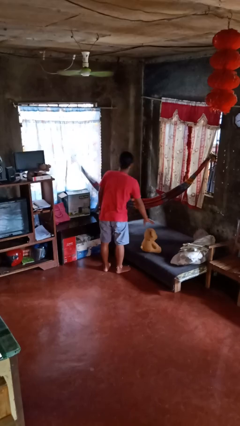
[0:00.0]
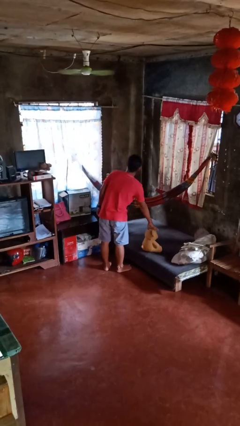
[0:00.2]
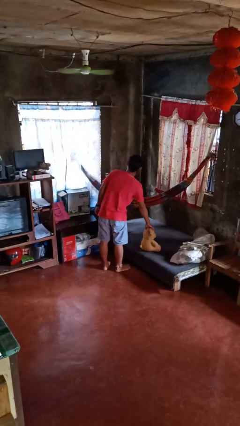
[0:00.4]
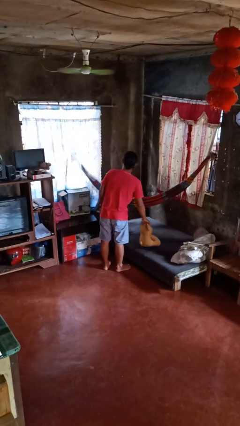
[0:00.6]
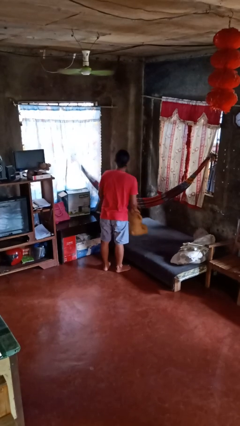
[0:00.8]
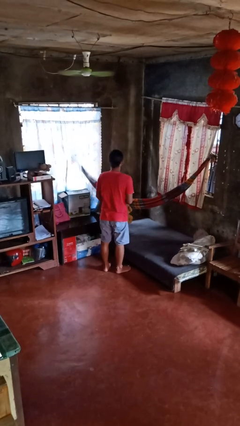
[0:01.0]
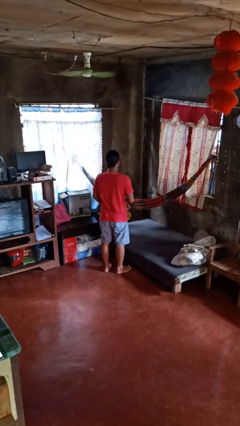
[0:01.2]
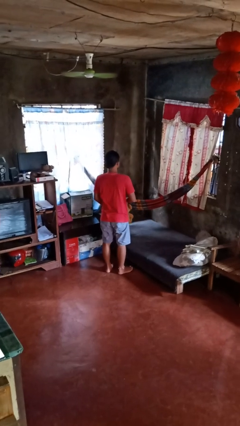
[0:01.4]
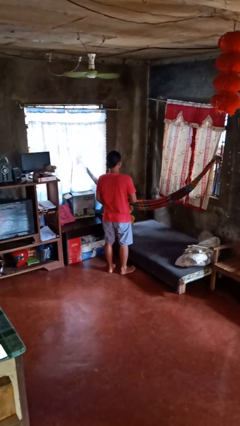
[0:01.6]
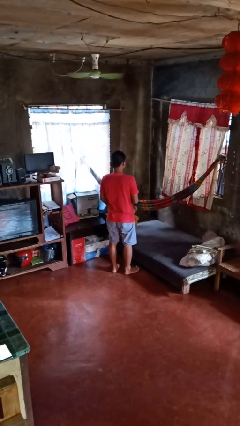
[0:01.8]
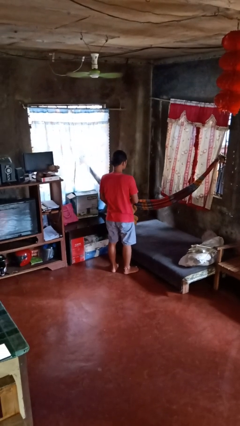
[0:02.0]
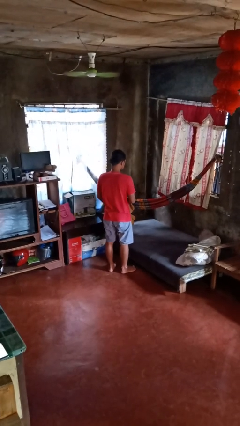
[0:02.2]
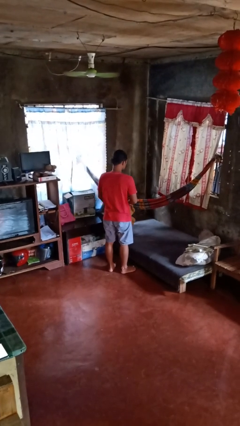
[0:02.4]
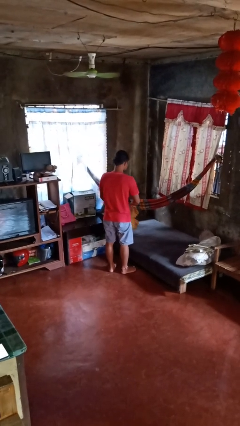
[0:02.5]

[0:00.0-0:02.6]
person picks up object from bed

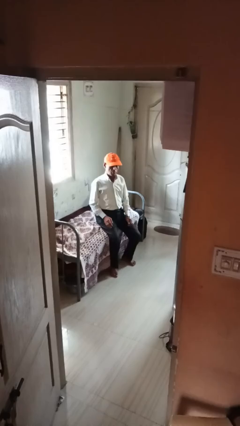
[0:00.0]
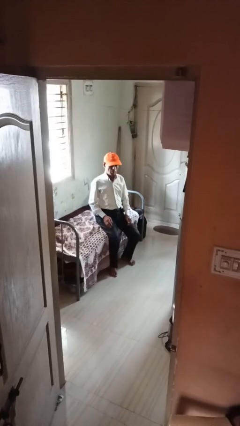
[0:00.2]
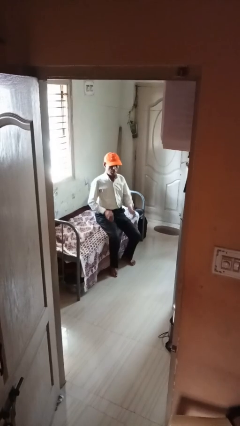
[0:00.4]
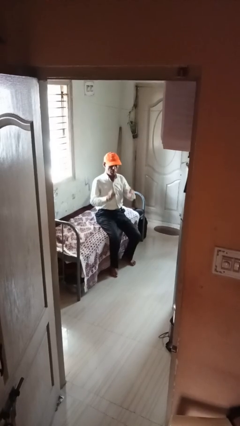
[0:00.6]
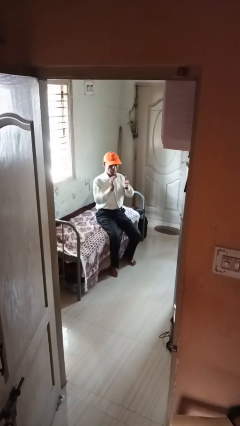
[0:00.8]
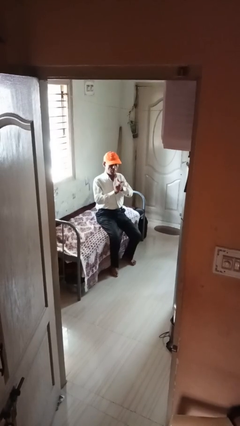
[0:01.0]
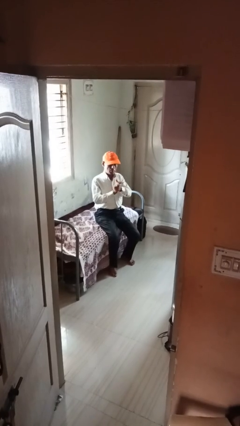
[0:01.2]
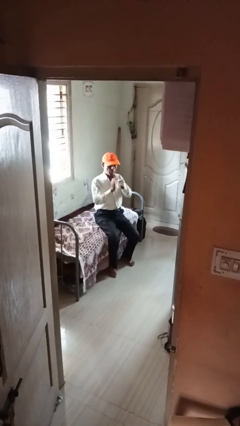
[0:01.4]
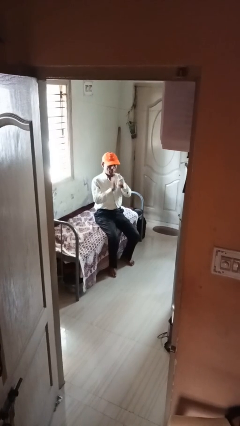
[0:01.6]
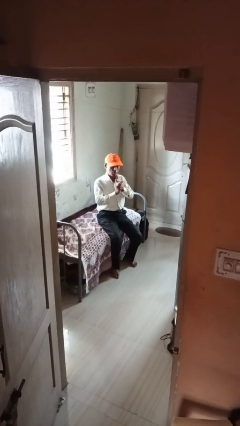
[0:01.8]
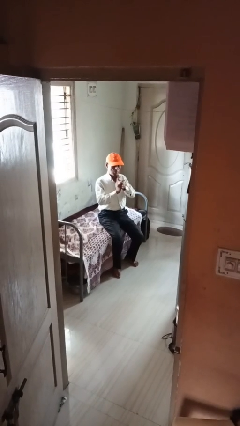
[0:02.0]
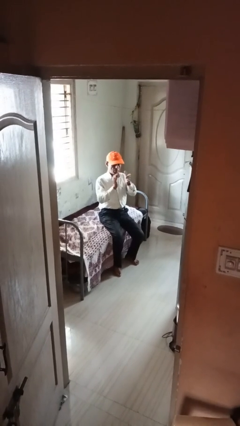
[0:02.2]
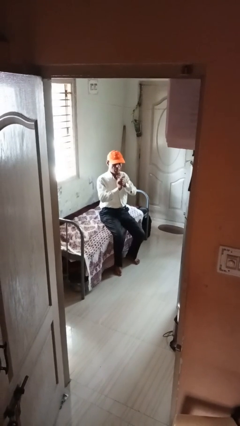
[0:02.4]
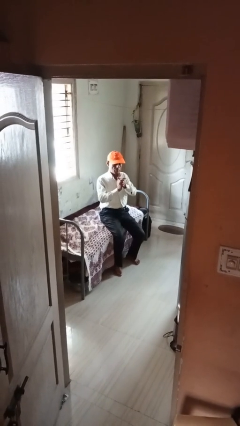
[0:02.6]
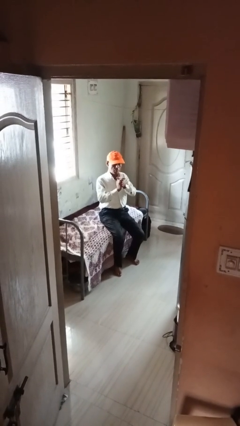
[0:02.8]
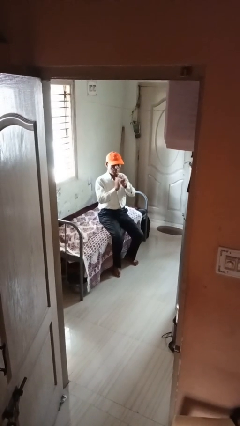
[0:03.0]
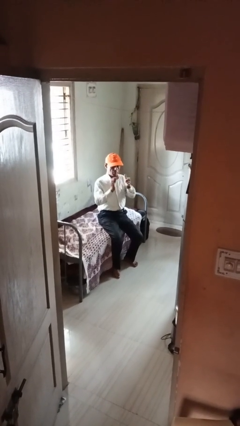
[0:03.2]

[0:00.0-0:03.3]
person claps hands

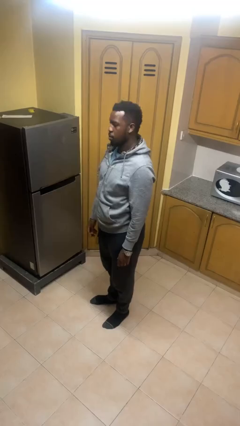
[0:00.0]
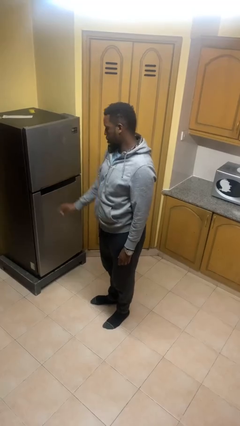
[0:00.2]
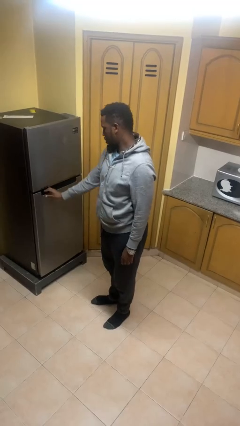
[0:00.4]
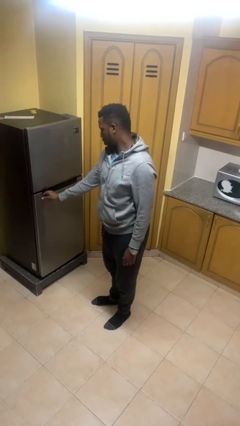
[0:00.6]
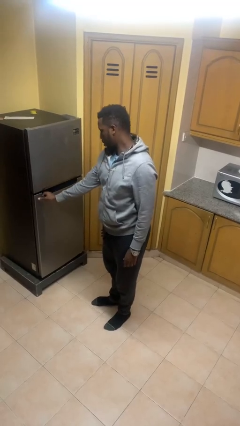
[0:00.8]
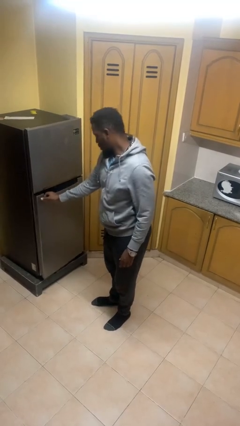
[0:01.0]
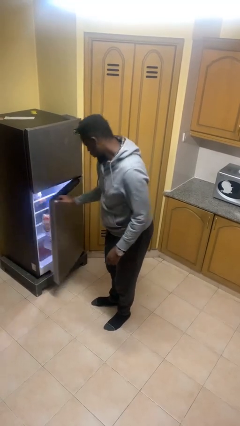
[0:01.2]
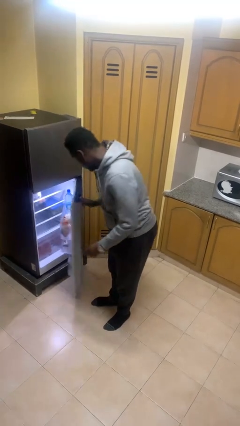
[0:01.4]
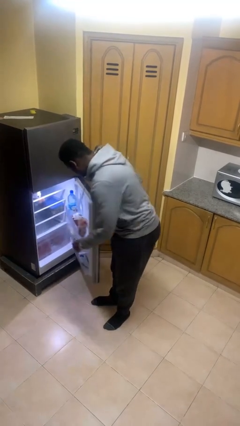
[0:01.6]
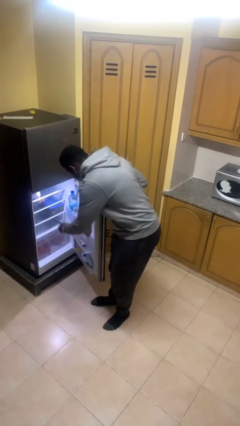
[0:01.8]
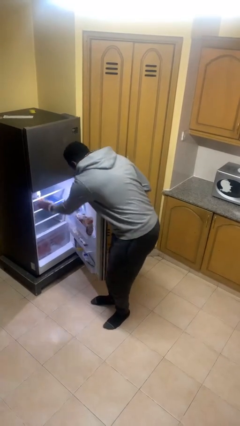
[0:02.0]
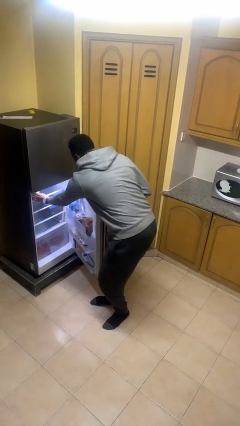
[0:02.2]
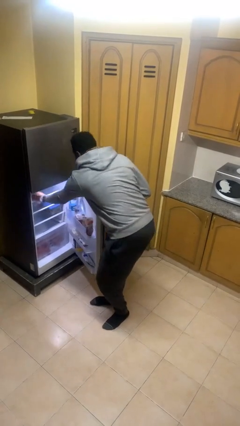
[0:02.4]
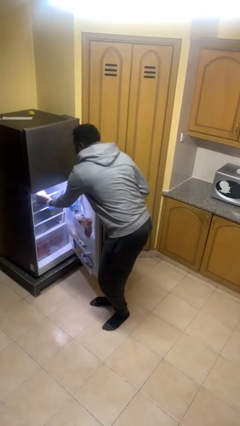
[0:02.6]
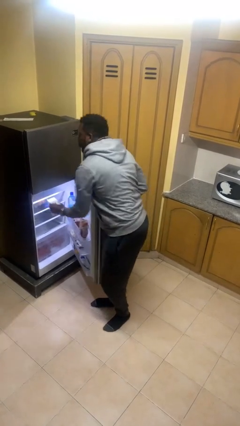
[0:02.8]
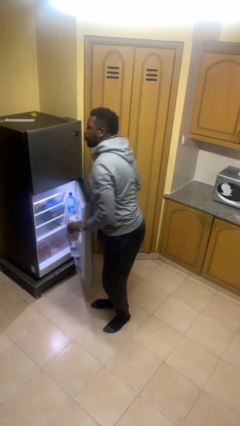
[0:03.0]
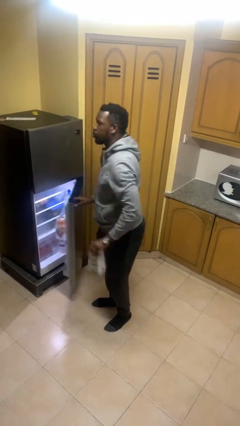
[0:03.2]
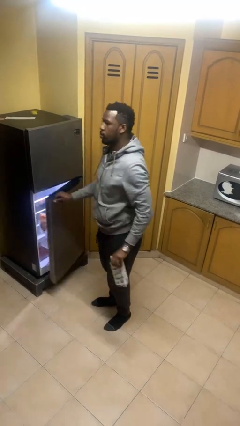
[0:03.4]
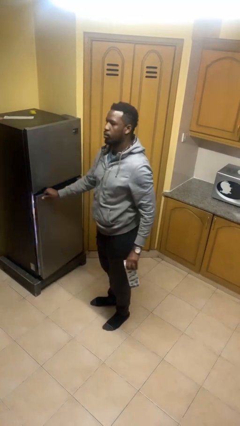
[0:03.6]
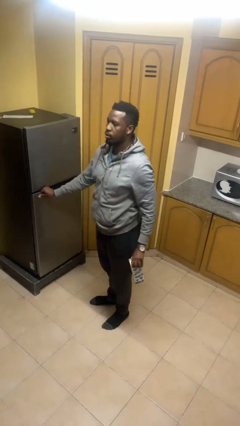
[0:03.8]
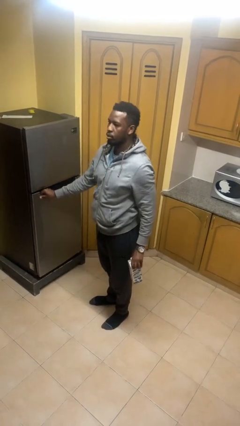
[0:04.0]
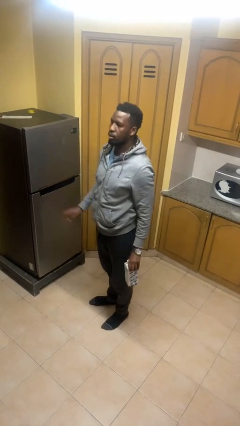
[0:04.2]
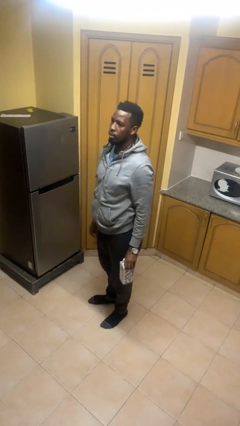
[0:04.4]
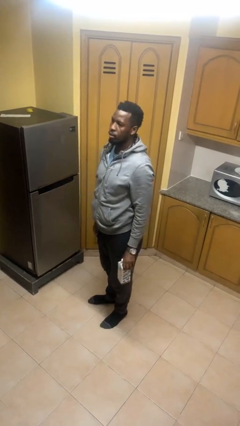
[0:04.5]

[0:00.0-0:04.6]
person takes object from refrigerator

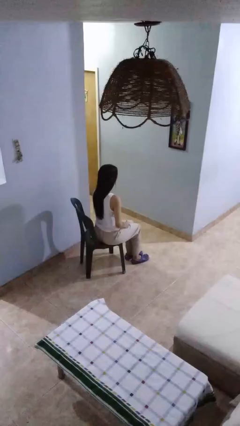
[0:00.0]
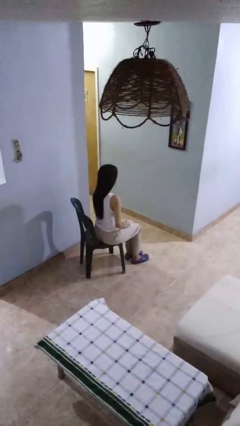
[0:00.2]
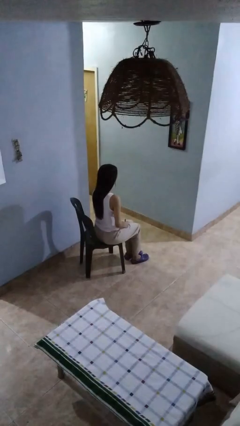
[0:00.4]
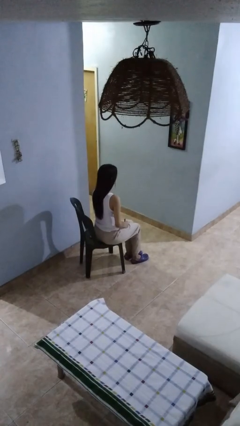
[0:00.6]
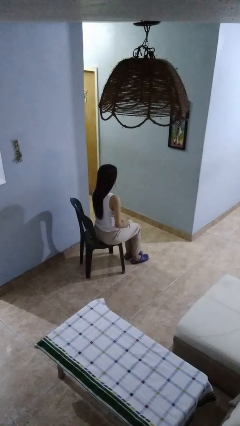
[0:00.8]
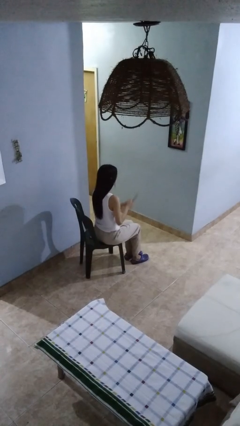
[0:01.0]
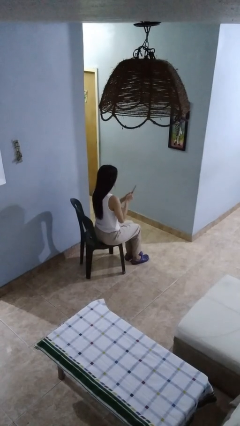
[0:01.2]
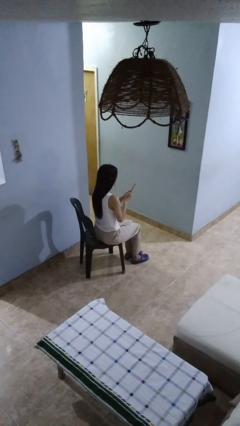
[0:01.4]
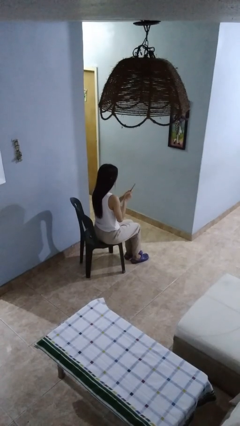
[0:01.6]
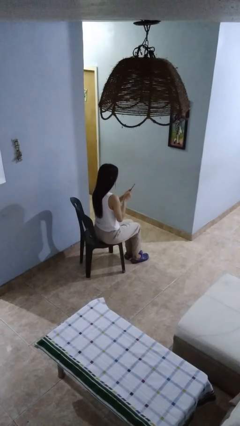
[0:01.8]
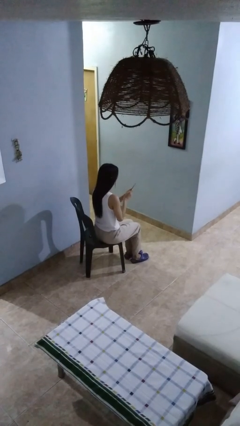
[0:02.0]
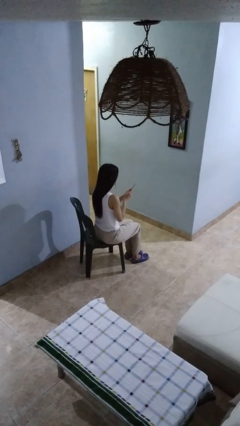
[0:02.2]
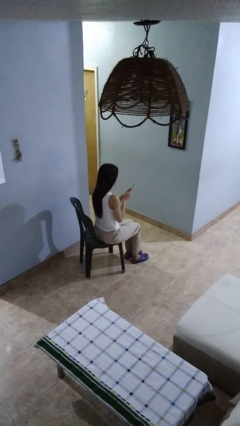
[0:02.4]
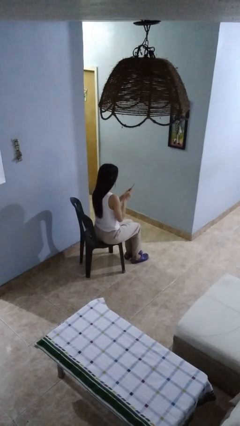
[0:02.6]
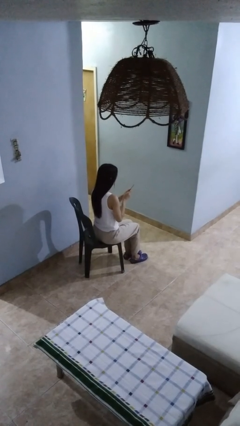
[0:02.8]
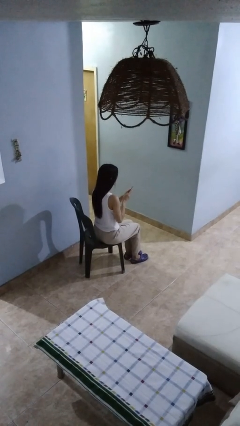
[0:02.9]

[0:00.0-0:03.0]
person files fingernails

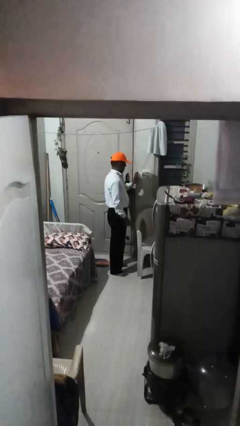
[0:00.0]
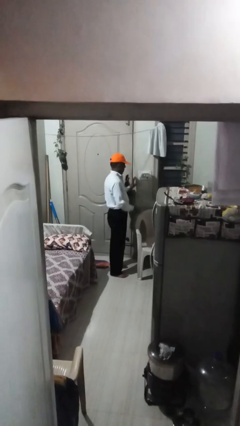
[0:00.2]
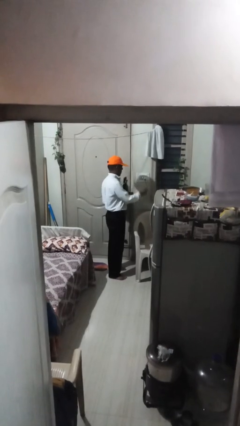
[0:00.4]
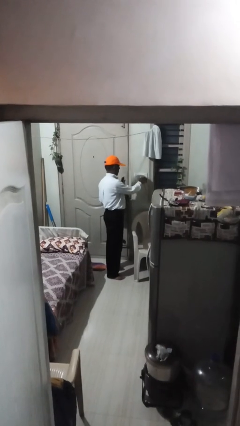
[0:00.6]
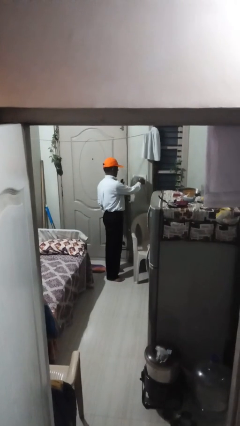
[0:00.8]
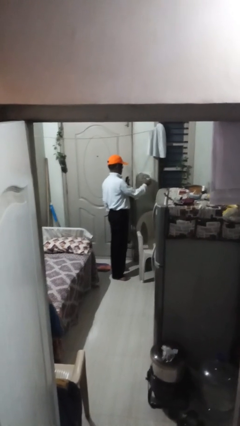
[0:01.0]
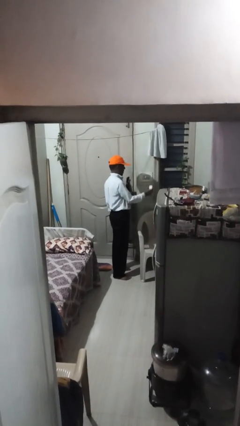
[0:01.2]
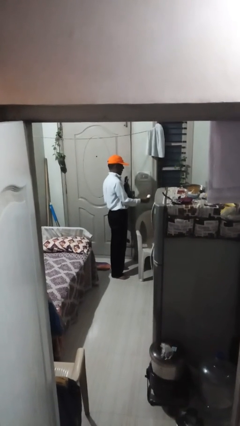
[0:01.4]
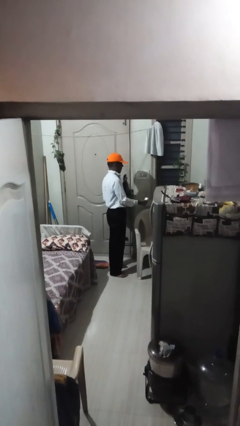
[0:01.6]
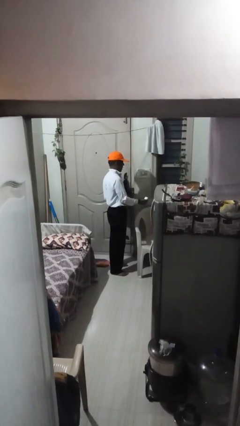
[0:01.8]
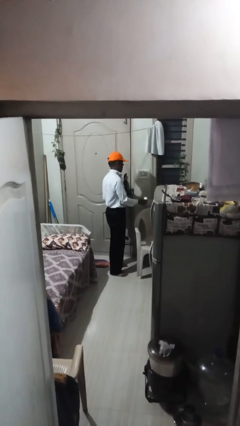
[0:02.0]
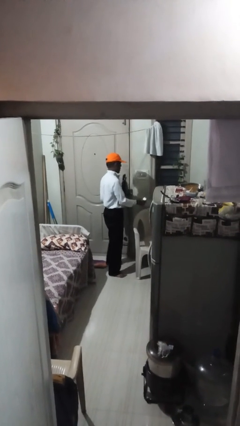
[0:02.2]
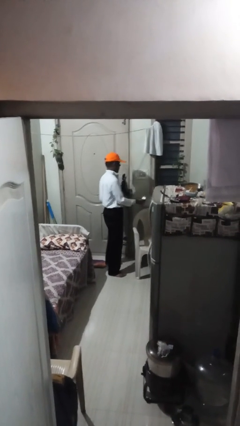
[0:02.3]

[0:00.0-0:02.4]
person unplugs from electrical socket

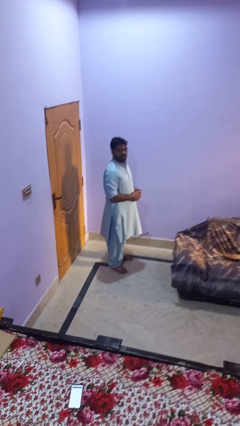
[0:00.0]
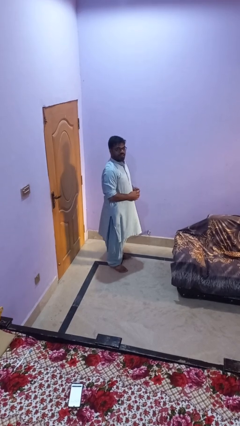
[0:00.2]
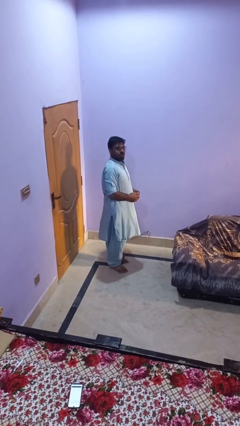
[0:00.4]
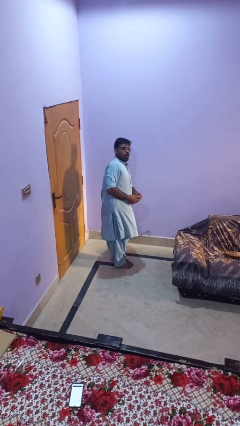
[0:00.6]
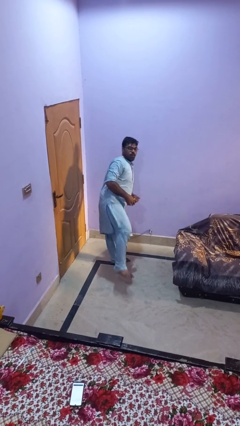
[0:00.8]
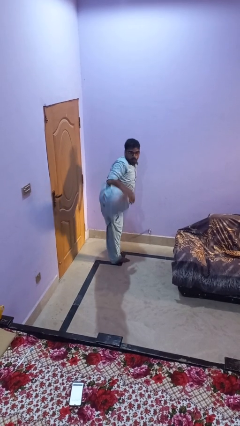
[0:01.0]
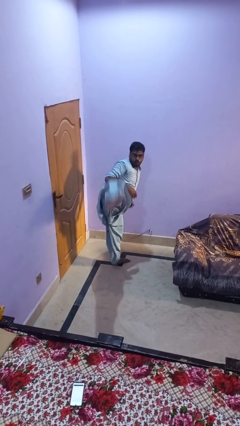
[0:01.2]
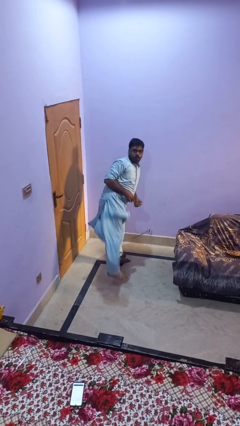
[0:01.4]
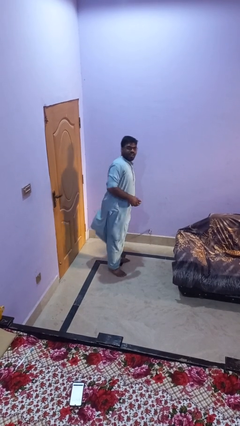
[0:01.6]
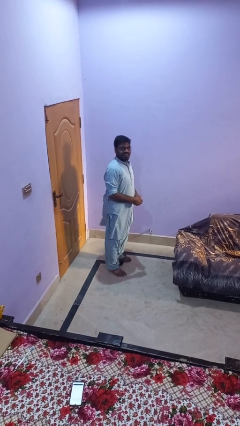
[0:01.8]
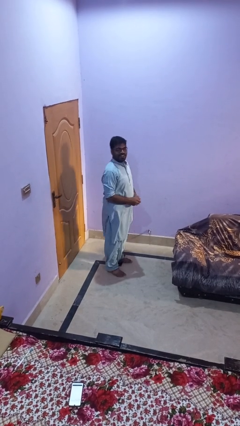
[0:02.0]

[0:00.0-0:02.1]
person karate kicks
